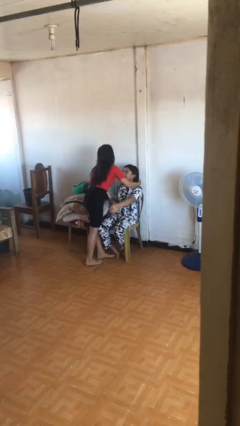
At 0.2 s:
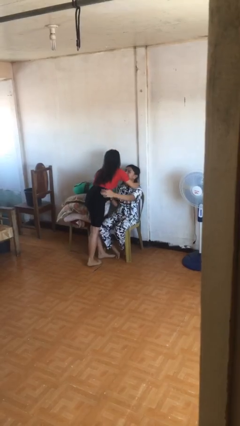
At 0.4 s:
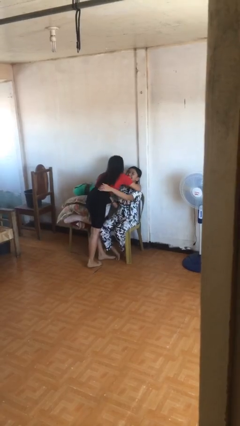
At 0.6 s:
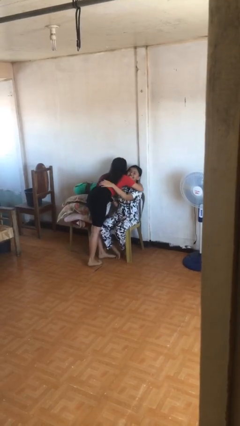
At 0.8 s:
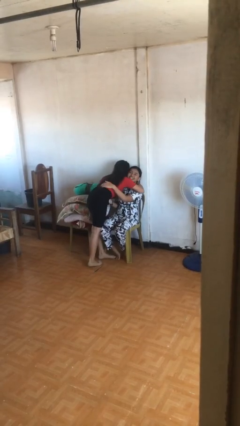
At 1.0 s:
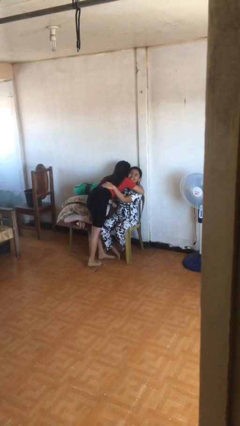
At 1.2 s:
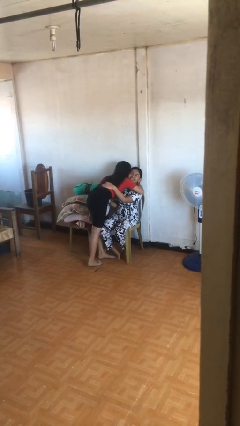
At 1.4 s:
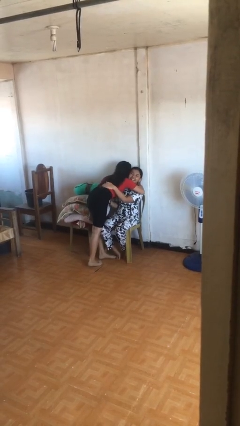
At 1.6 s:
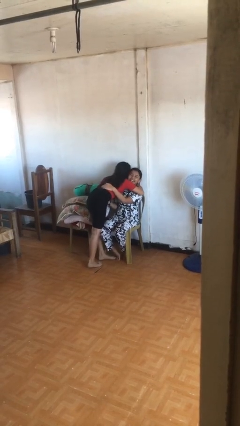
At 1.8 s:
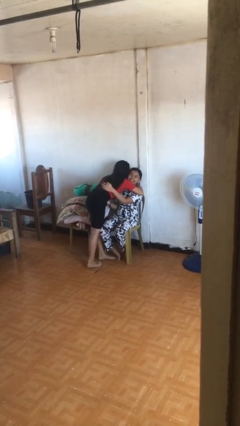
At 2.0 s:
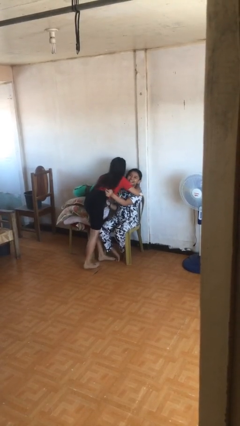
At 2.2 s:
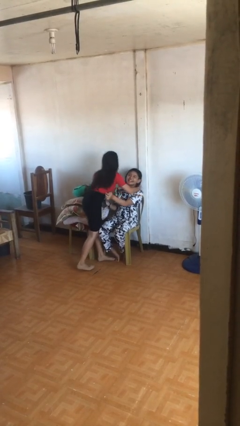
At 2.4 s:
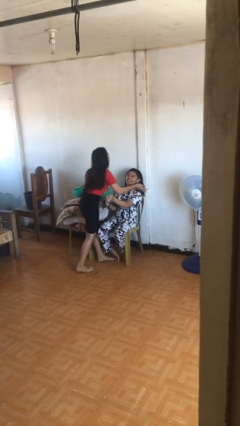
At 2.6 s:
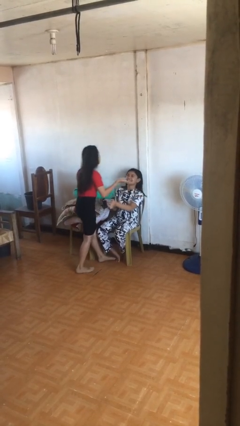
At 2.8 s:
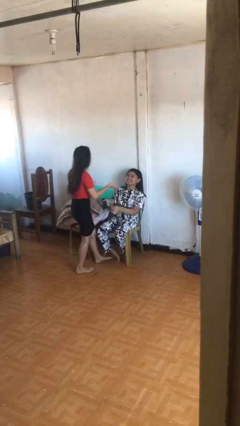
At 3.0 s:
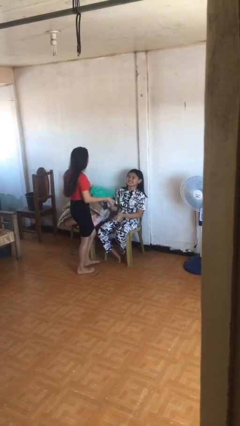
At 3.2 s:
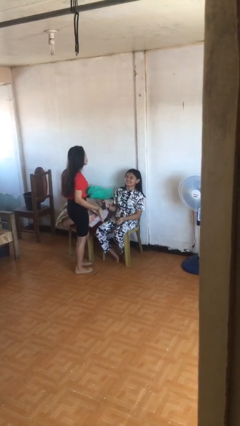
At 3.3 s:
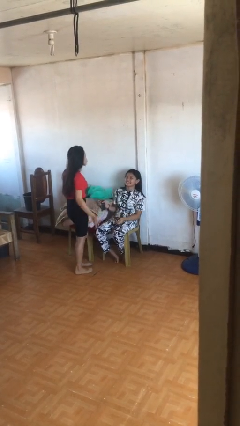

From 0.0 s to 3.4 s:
person embraces person

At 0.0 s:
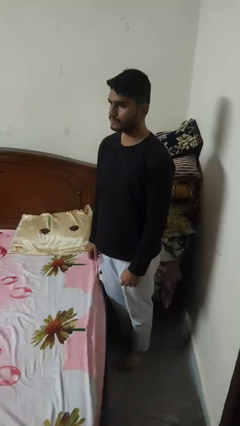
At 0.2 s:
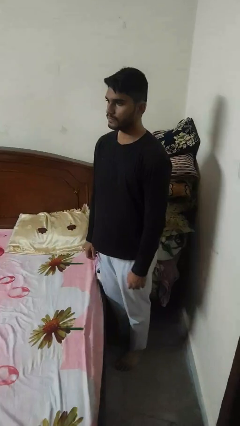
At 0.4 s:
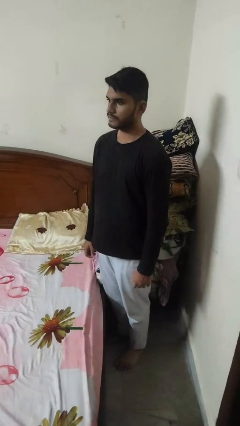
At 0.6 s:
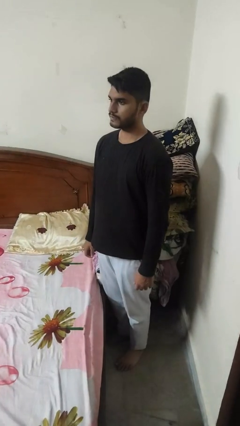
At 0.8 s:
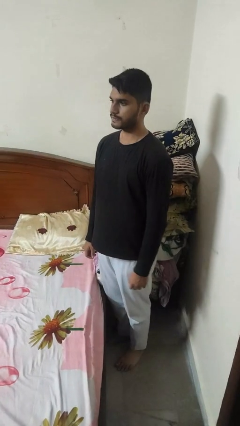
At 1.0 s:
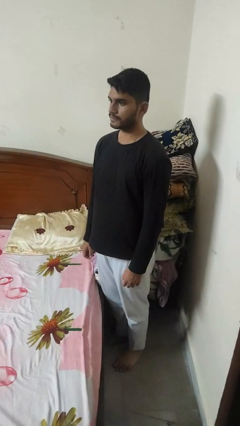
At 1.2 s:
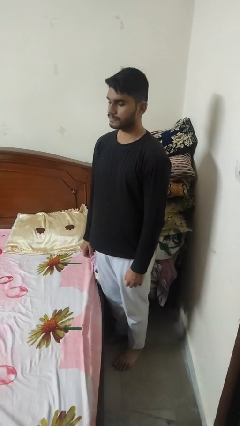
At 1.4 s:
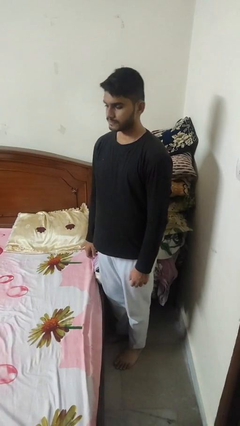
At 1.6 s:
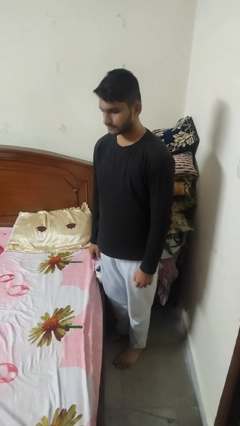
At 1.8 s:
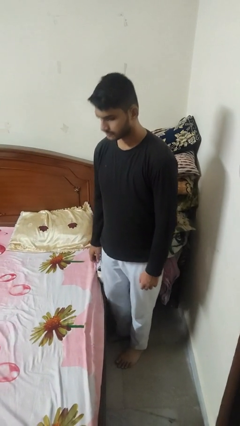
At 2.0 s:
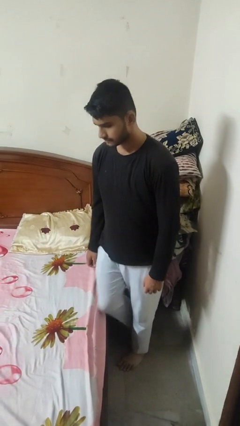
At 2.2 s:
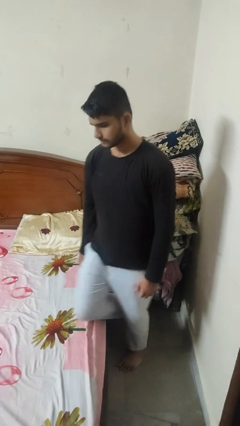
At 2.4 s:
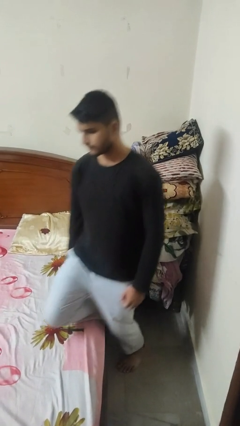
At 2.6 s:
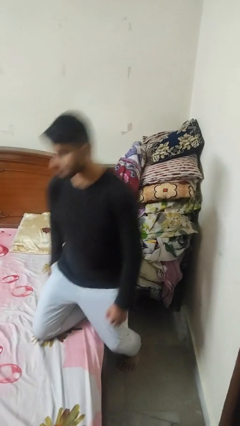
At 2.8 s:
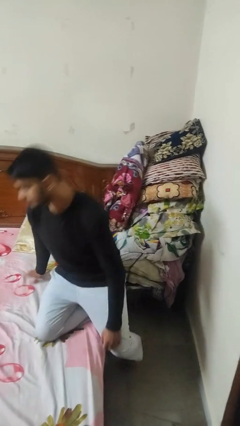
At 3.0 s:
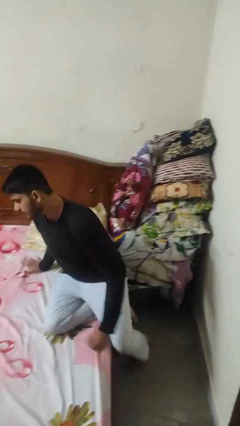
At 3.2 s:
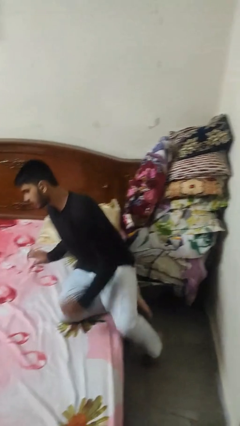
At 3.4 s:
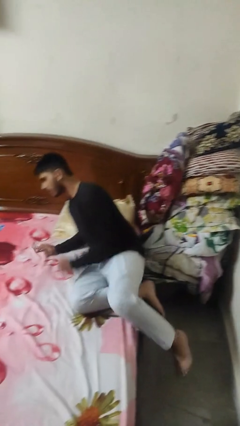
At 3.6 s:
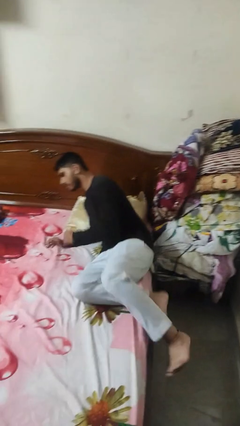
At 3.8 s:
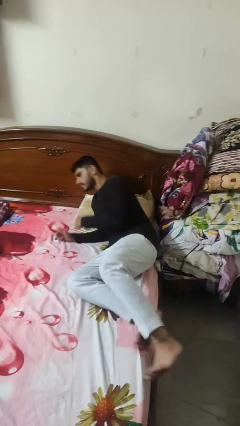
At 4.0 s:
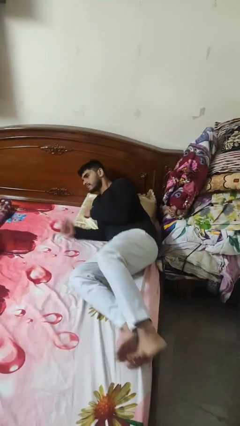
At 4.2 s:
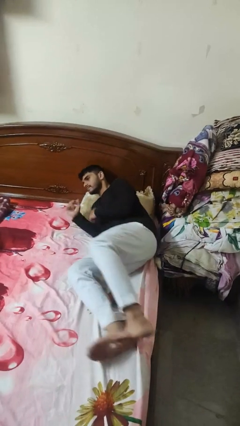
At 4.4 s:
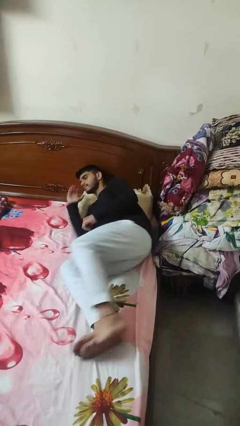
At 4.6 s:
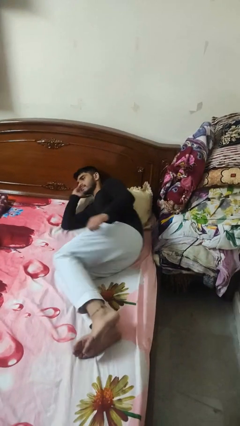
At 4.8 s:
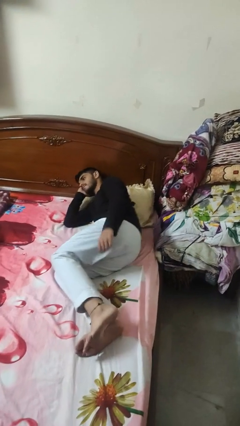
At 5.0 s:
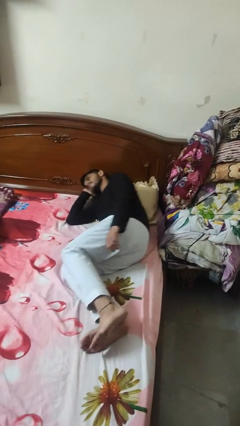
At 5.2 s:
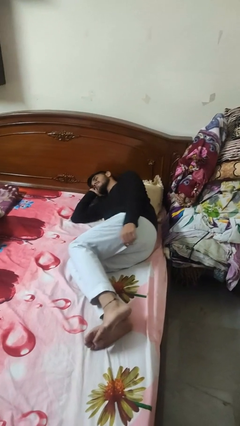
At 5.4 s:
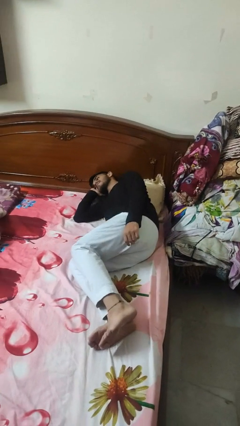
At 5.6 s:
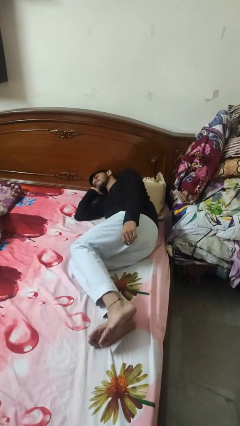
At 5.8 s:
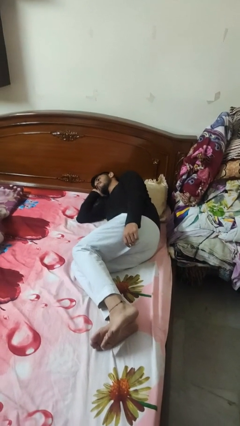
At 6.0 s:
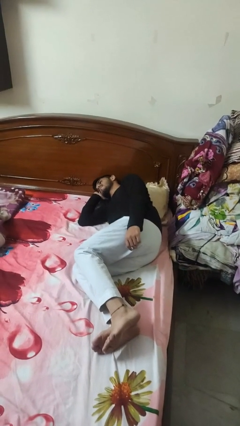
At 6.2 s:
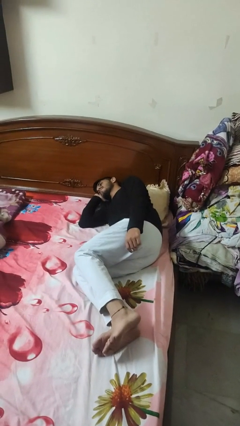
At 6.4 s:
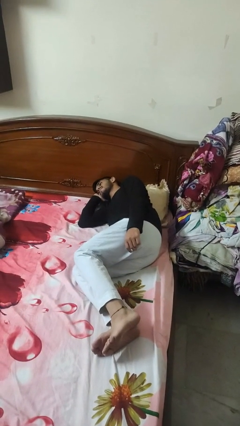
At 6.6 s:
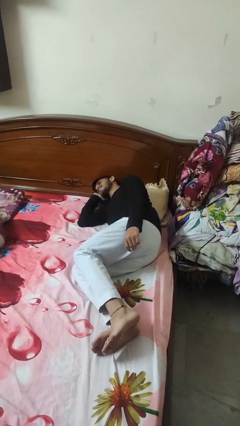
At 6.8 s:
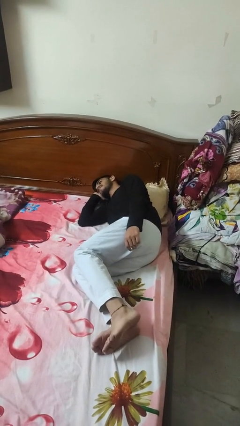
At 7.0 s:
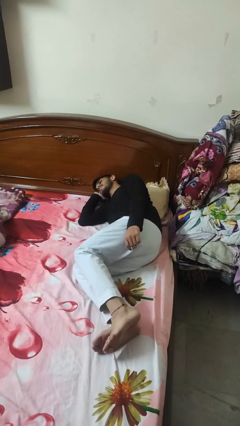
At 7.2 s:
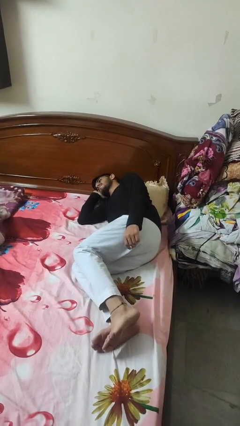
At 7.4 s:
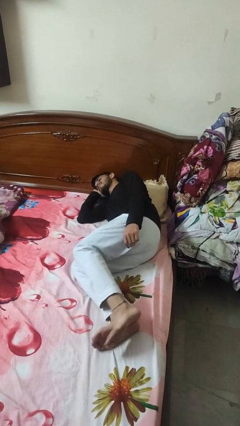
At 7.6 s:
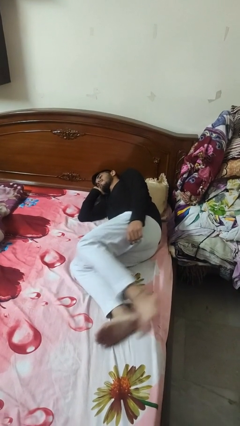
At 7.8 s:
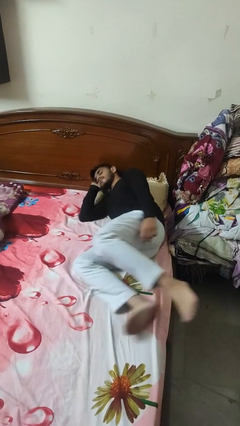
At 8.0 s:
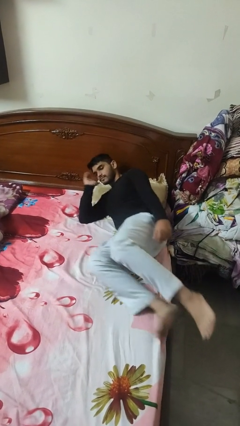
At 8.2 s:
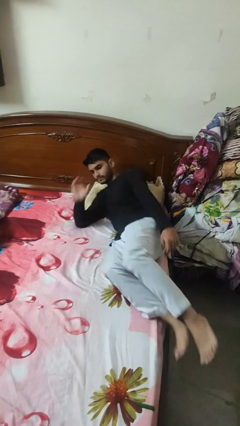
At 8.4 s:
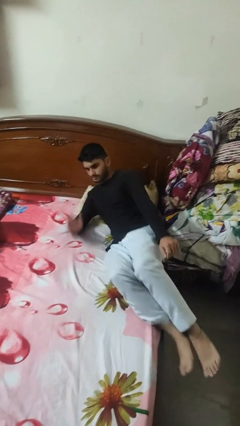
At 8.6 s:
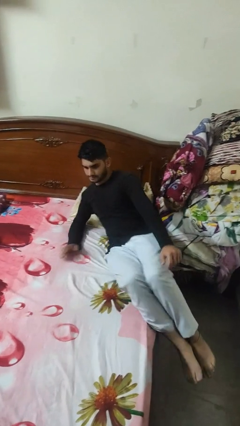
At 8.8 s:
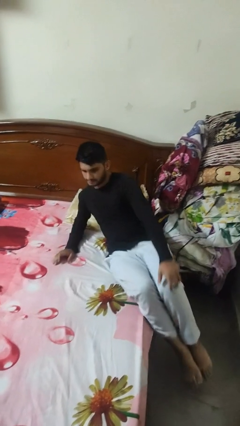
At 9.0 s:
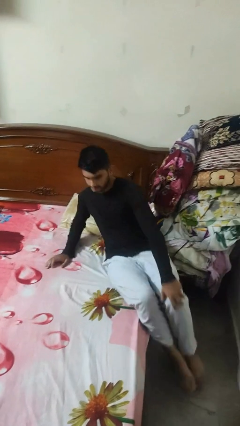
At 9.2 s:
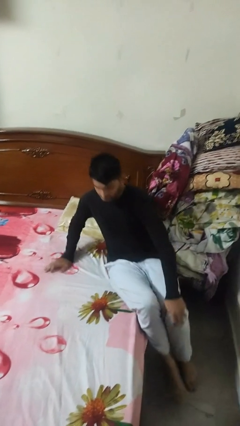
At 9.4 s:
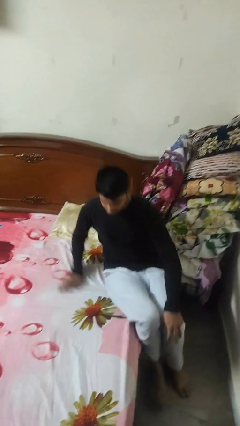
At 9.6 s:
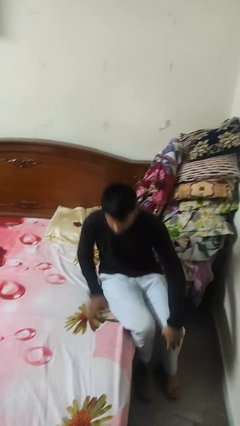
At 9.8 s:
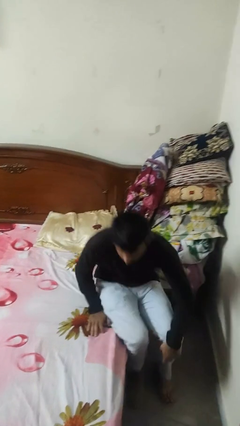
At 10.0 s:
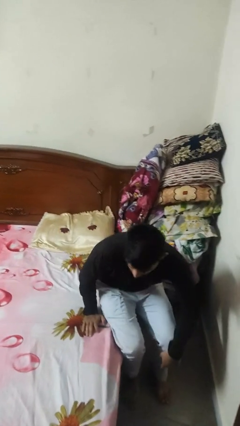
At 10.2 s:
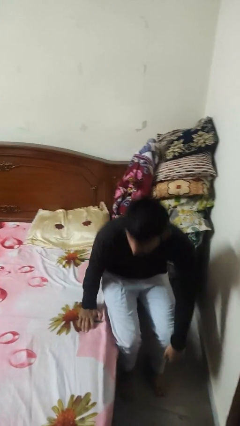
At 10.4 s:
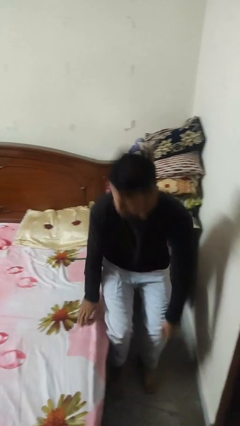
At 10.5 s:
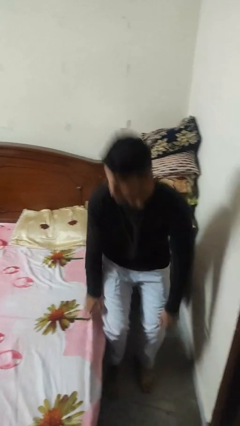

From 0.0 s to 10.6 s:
person stands up

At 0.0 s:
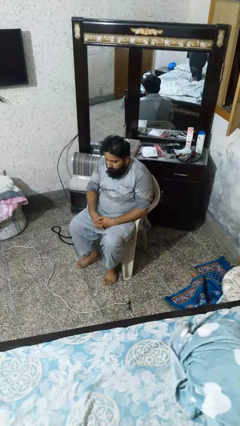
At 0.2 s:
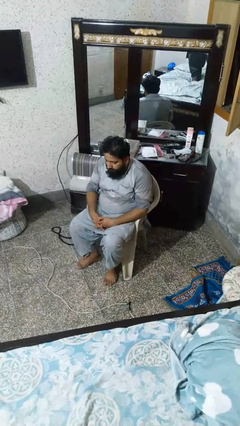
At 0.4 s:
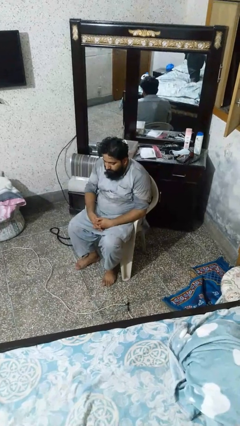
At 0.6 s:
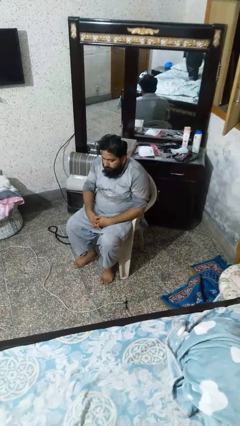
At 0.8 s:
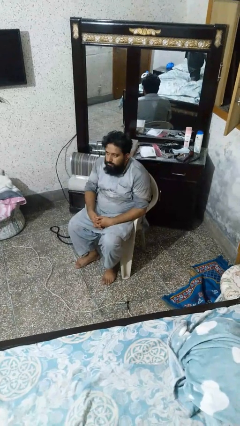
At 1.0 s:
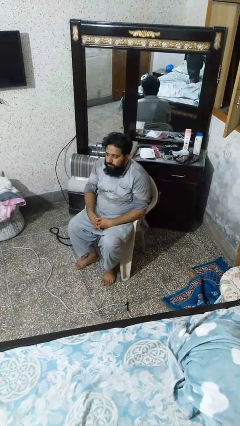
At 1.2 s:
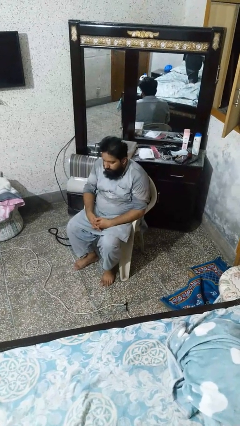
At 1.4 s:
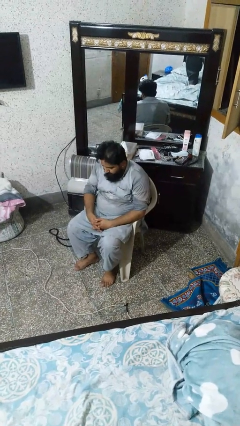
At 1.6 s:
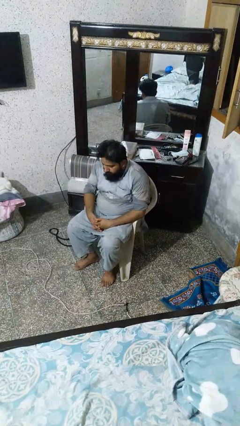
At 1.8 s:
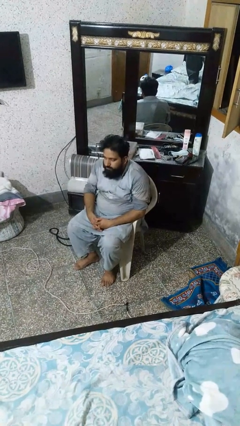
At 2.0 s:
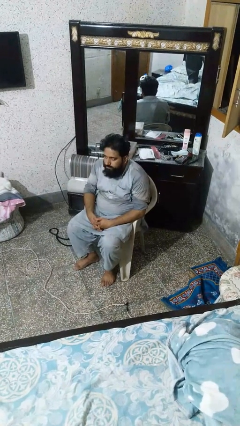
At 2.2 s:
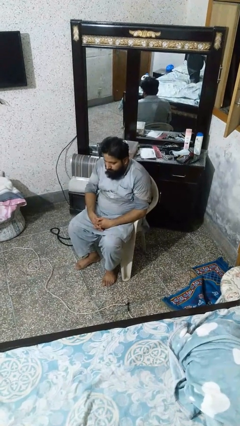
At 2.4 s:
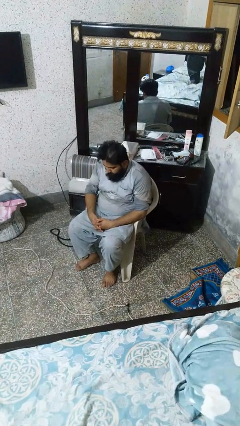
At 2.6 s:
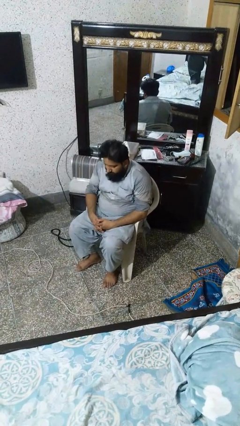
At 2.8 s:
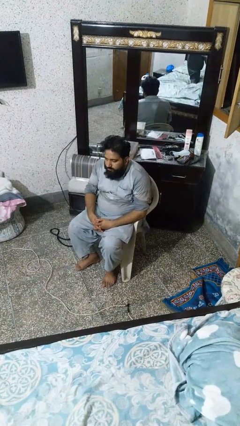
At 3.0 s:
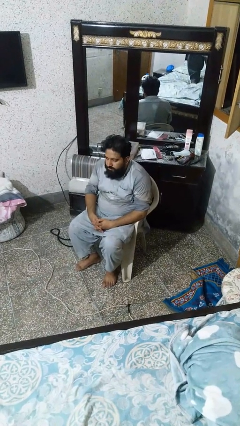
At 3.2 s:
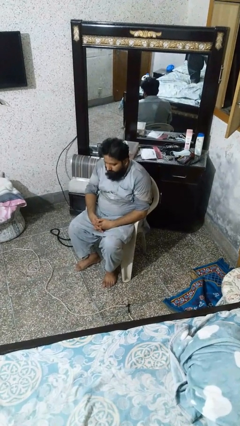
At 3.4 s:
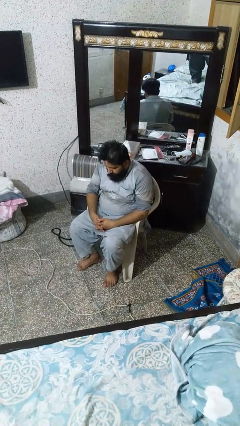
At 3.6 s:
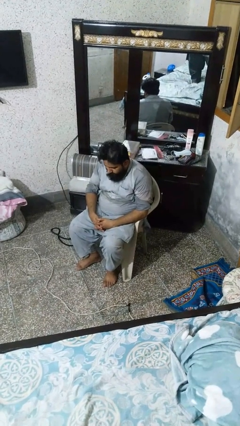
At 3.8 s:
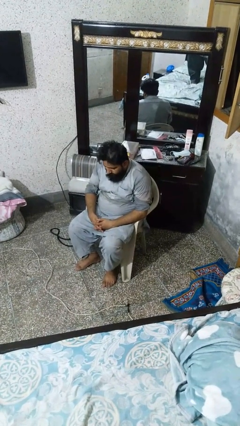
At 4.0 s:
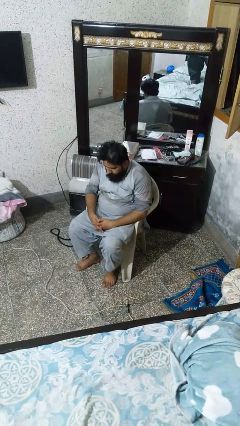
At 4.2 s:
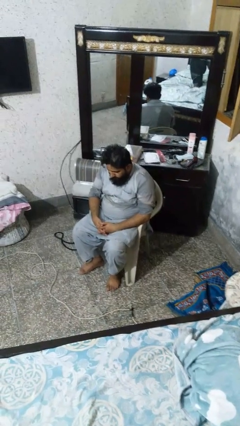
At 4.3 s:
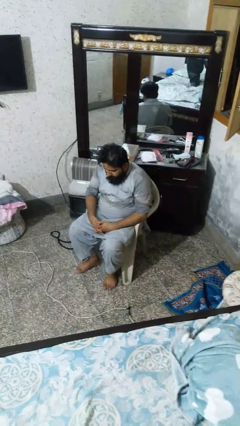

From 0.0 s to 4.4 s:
person nods head
